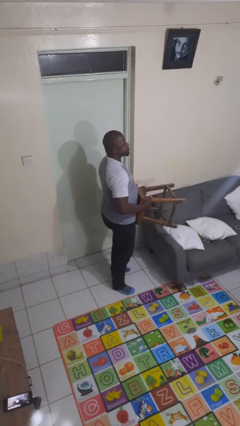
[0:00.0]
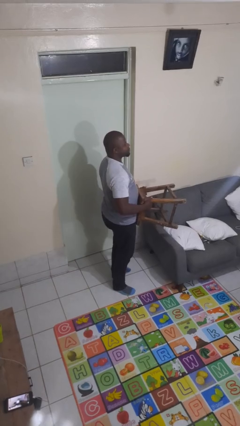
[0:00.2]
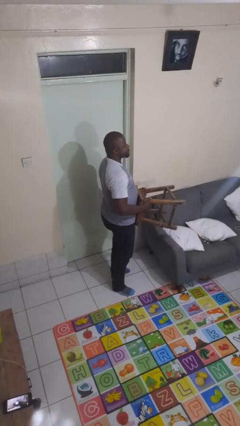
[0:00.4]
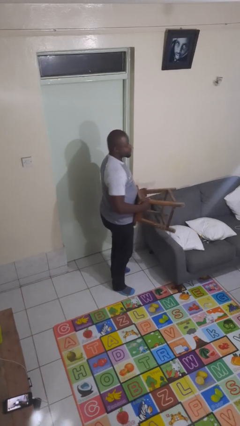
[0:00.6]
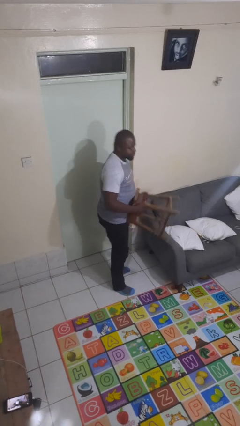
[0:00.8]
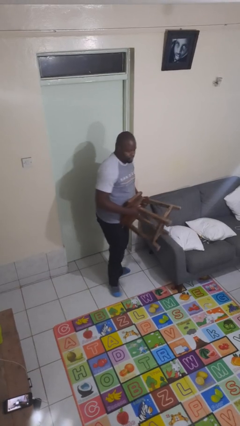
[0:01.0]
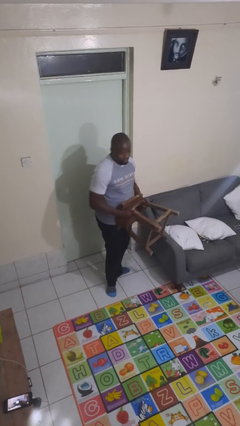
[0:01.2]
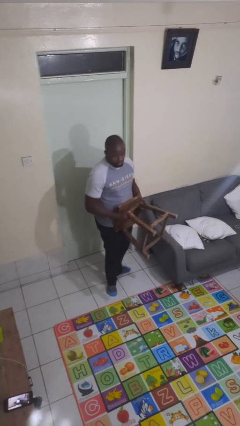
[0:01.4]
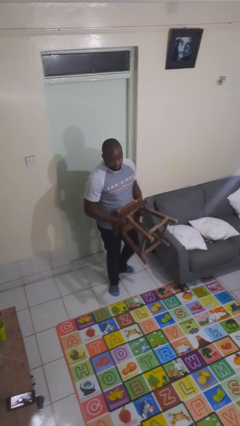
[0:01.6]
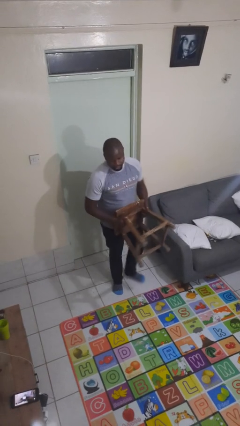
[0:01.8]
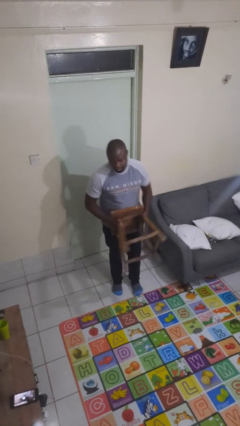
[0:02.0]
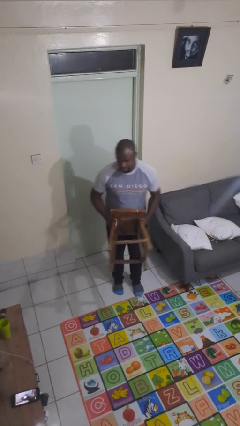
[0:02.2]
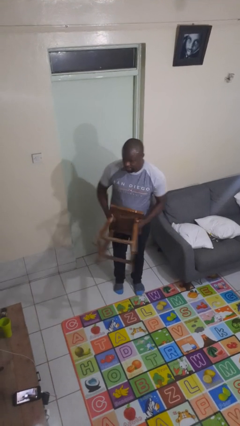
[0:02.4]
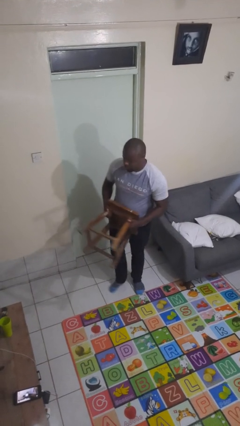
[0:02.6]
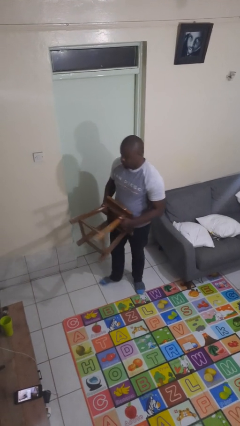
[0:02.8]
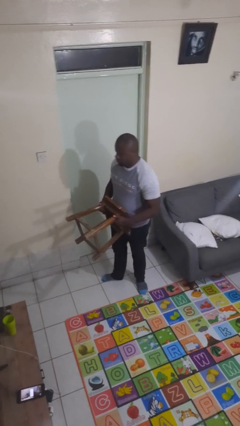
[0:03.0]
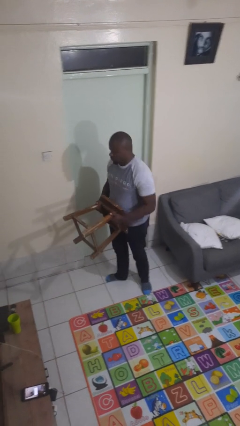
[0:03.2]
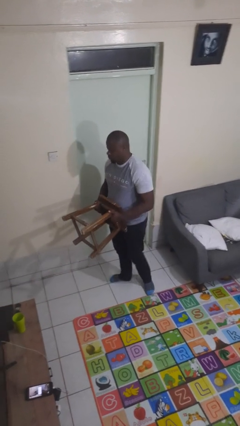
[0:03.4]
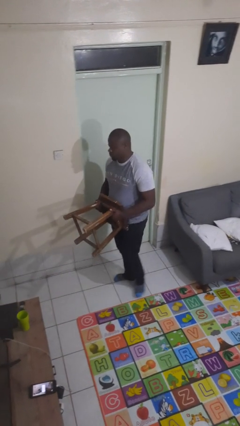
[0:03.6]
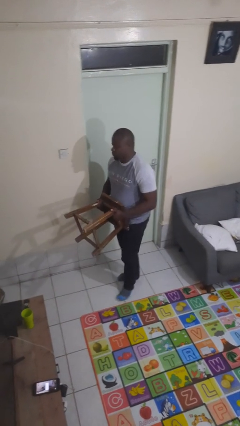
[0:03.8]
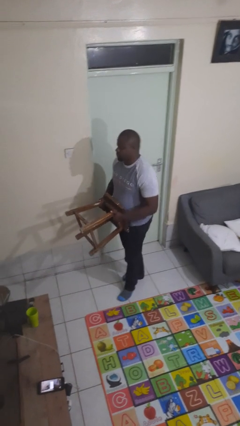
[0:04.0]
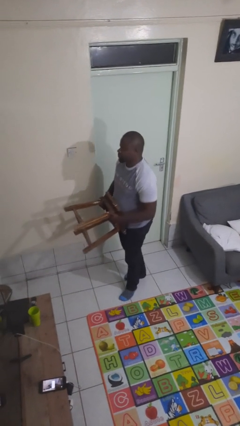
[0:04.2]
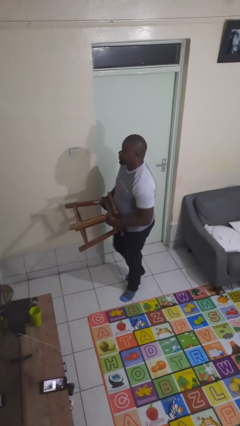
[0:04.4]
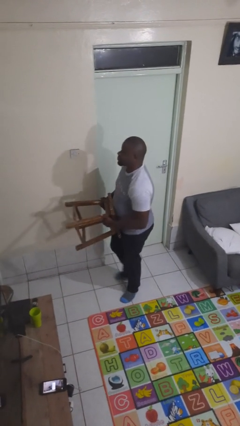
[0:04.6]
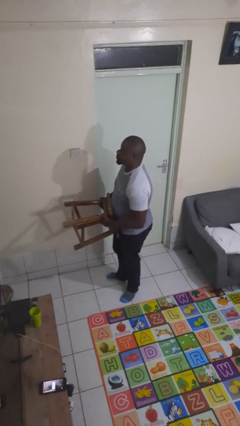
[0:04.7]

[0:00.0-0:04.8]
person carries furniture

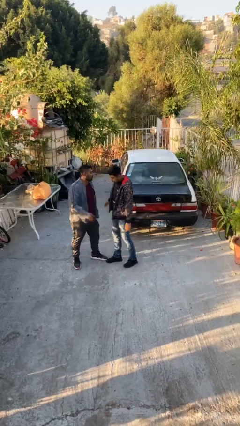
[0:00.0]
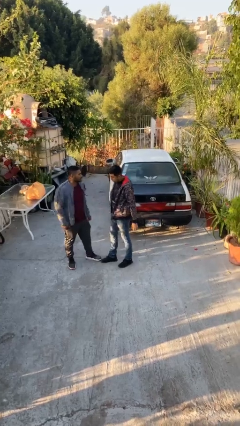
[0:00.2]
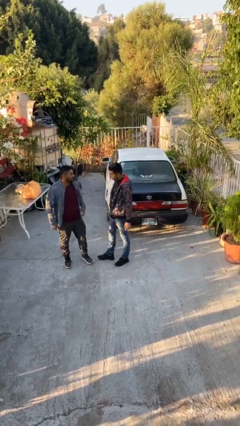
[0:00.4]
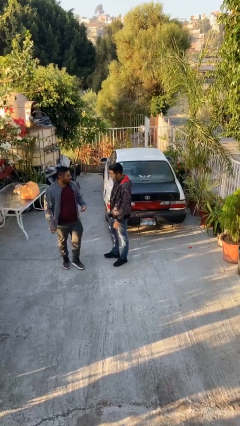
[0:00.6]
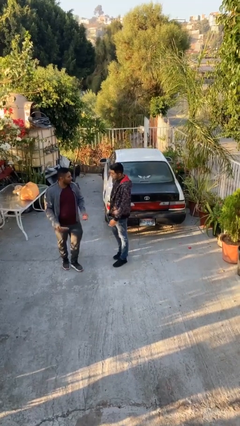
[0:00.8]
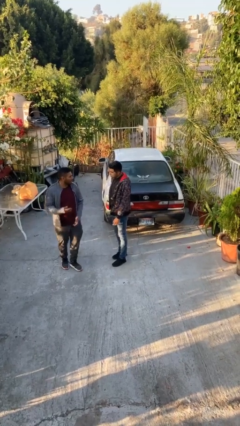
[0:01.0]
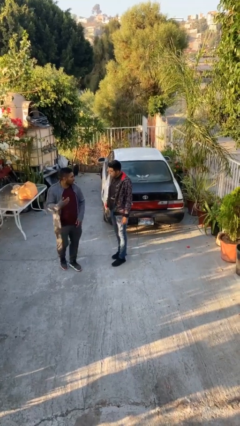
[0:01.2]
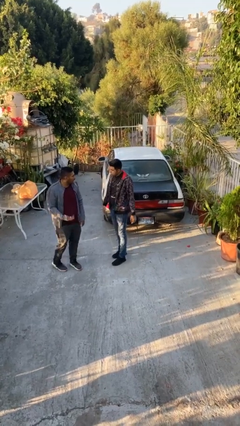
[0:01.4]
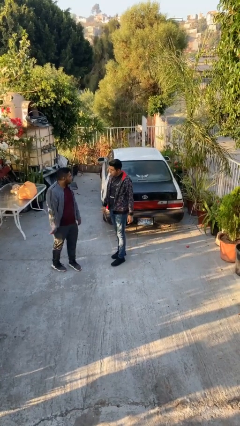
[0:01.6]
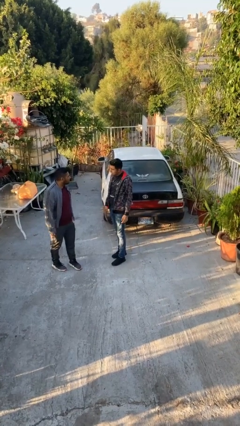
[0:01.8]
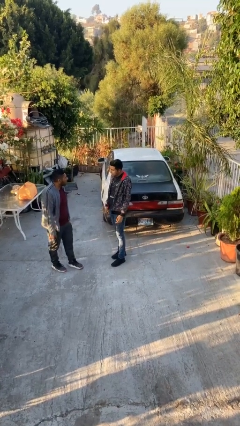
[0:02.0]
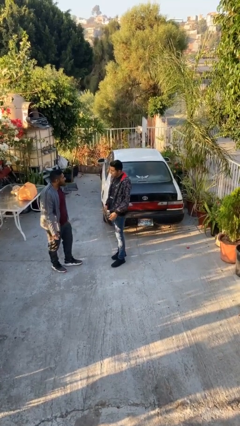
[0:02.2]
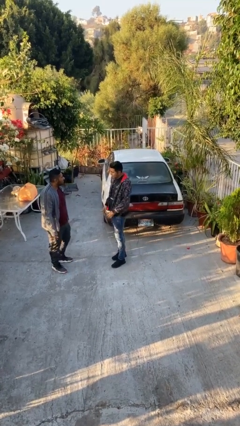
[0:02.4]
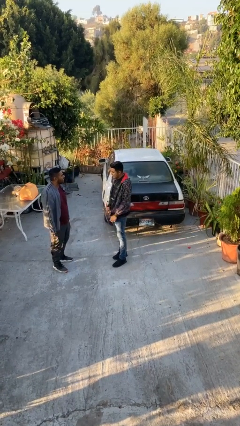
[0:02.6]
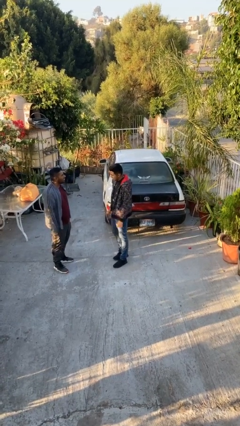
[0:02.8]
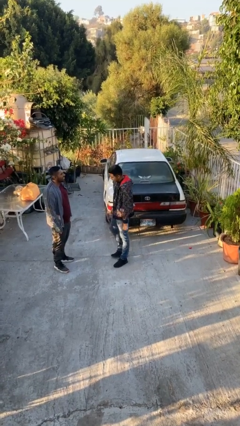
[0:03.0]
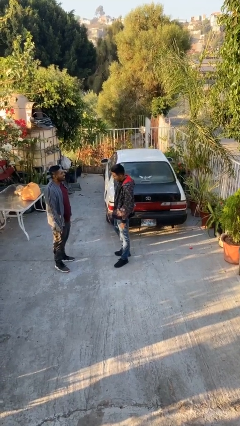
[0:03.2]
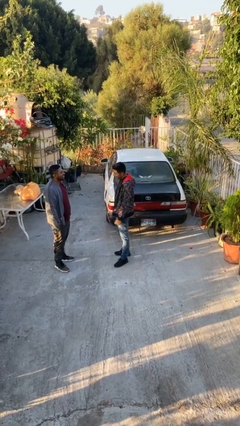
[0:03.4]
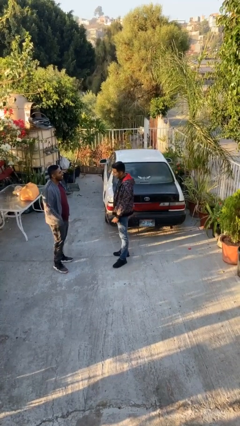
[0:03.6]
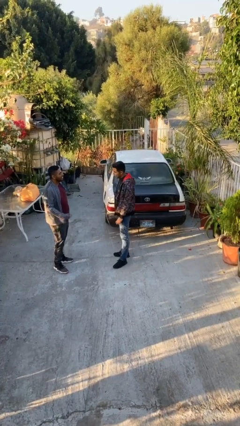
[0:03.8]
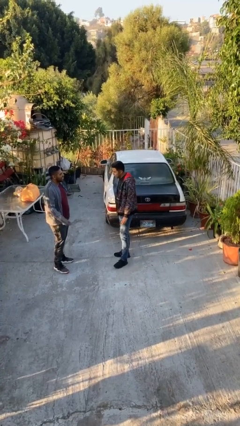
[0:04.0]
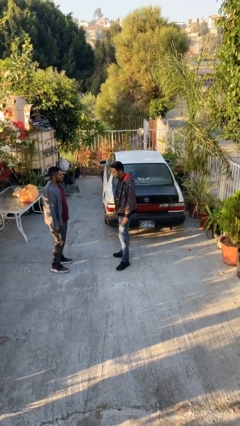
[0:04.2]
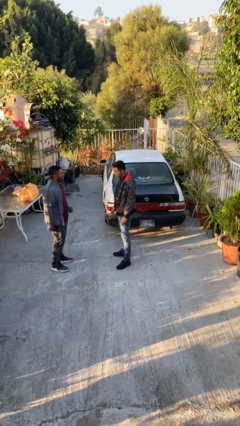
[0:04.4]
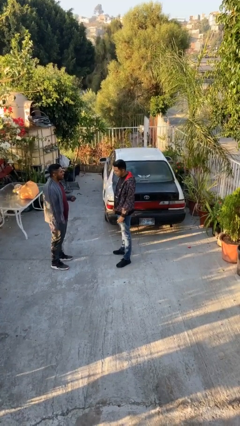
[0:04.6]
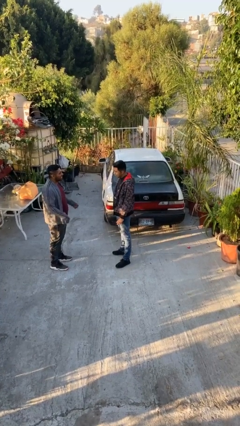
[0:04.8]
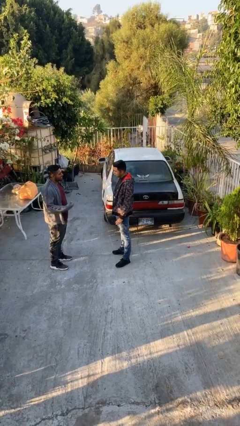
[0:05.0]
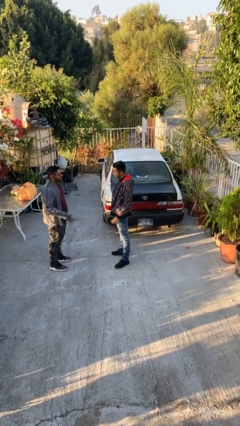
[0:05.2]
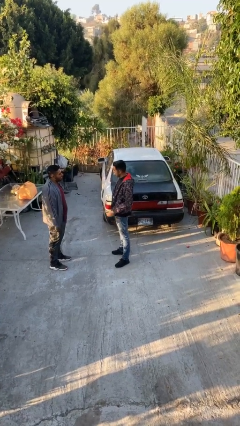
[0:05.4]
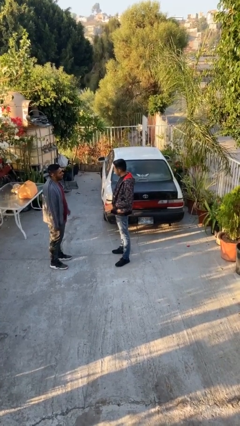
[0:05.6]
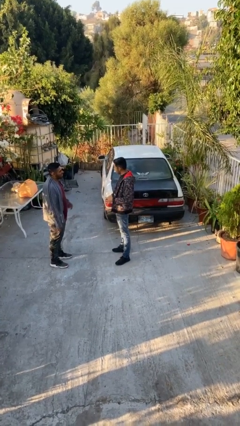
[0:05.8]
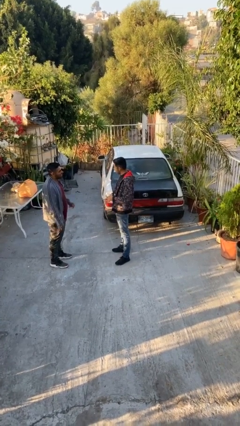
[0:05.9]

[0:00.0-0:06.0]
person talks to person

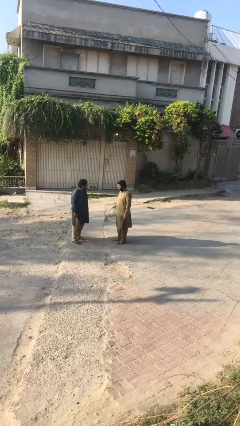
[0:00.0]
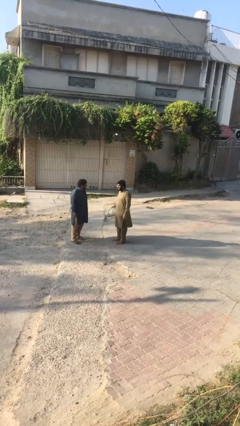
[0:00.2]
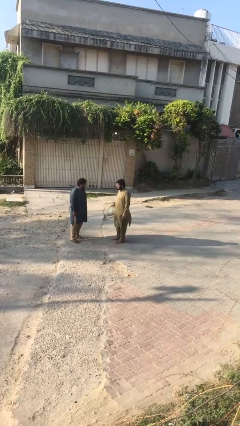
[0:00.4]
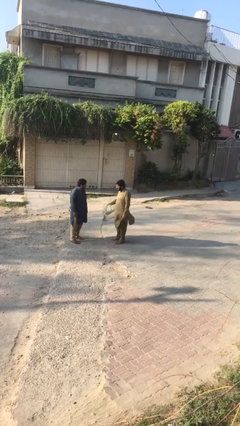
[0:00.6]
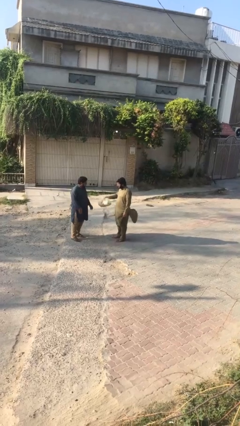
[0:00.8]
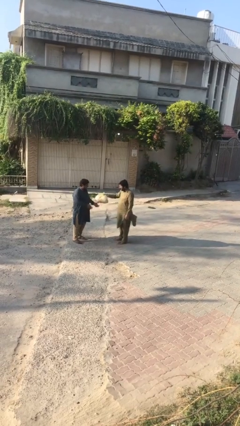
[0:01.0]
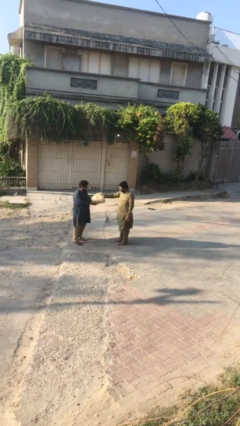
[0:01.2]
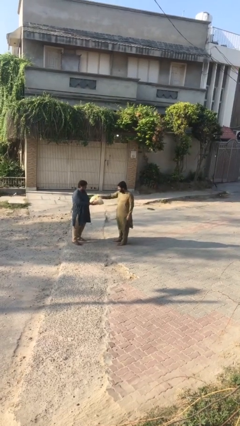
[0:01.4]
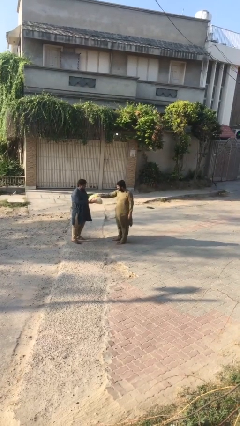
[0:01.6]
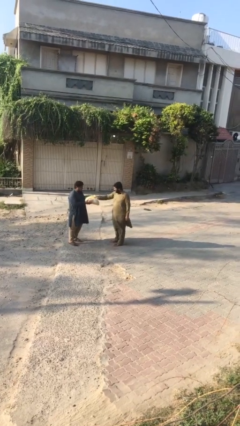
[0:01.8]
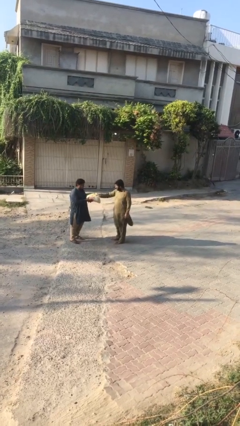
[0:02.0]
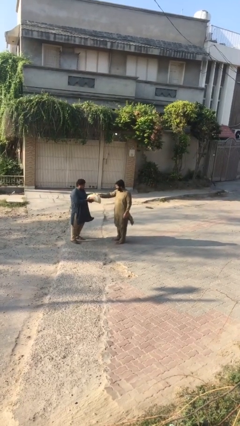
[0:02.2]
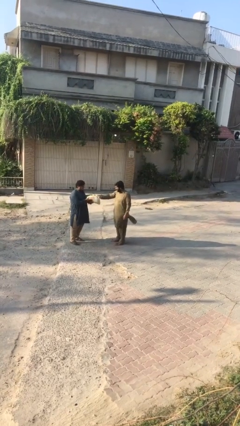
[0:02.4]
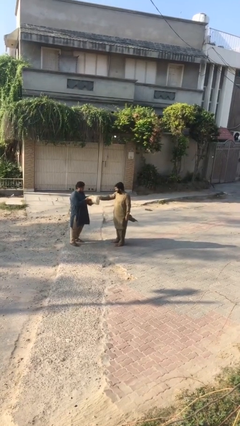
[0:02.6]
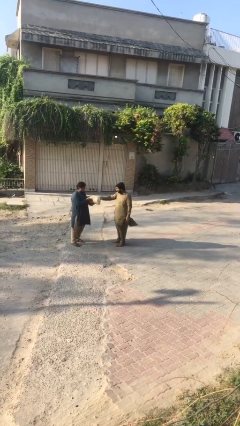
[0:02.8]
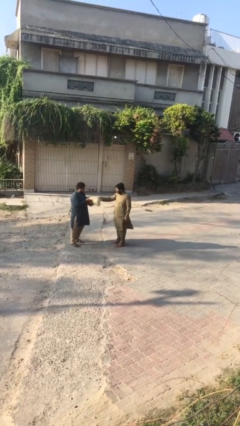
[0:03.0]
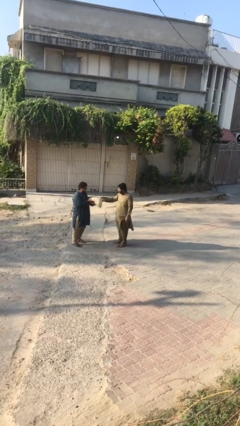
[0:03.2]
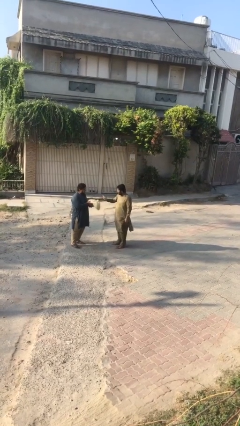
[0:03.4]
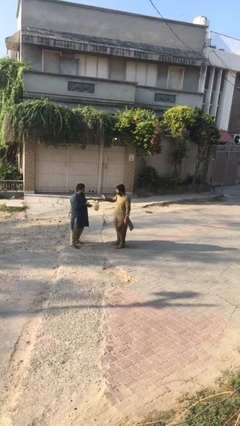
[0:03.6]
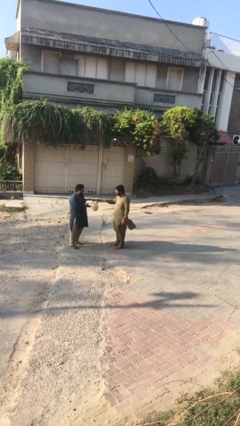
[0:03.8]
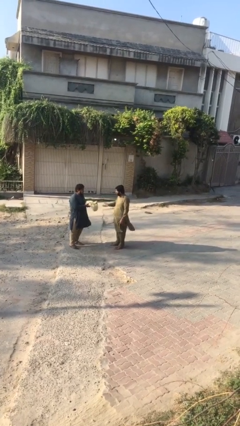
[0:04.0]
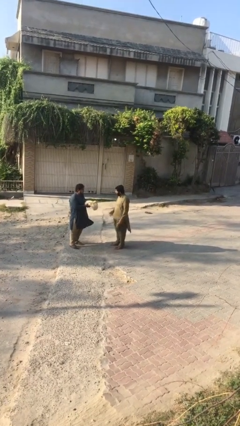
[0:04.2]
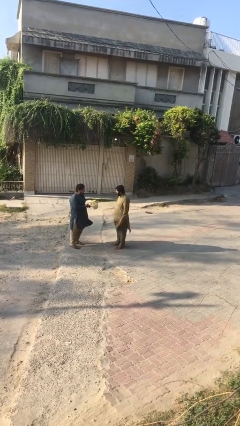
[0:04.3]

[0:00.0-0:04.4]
person transfers object to person

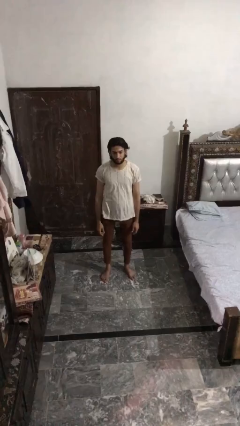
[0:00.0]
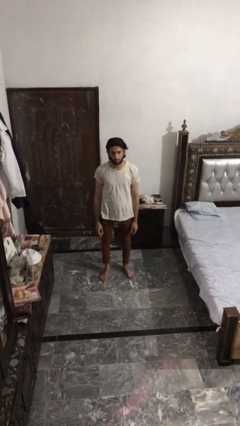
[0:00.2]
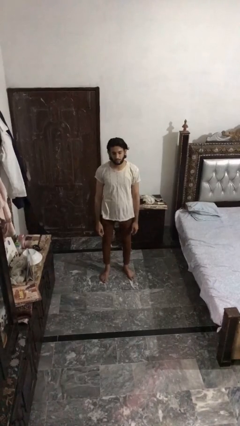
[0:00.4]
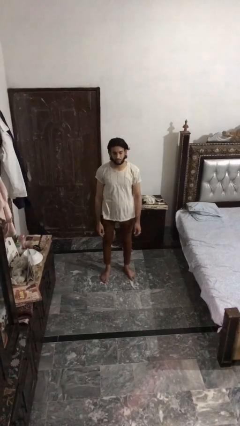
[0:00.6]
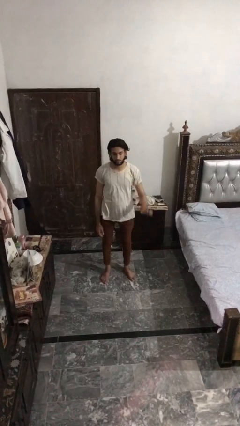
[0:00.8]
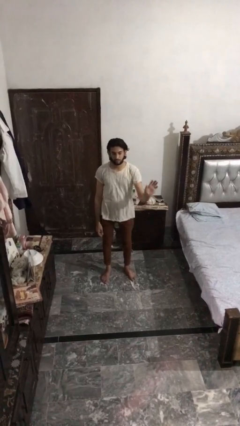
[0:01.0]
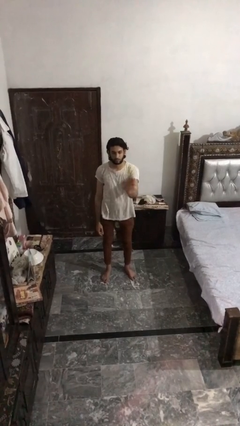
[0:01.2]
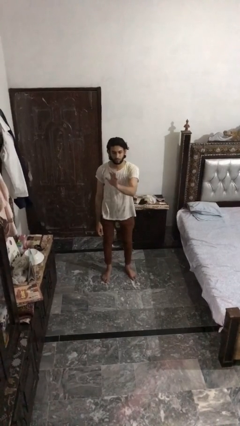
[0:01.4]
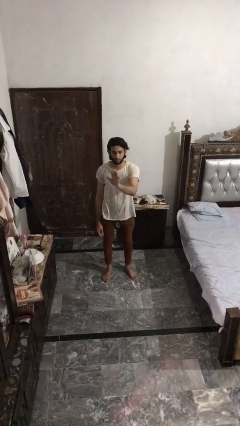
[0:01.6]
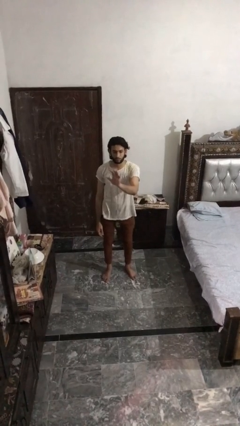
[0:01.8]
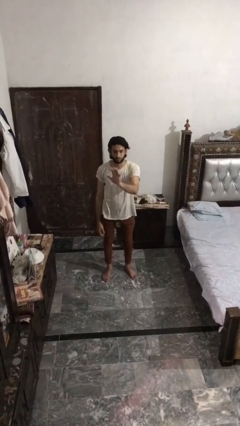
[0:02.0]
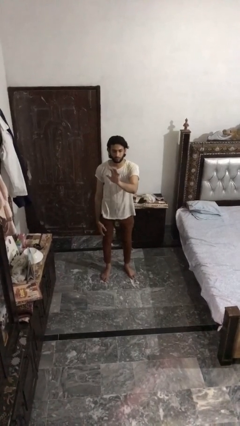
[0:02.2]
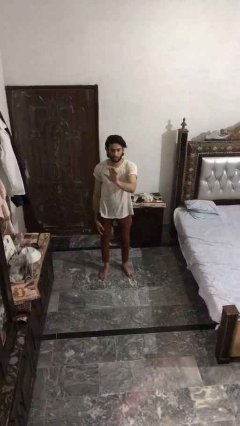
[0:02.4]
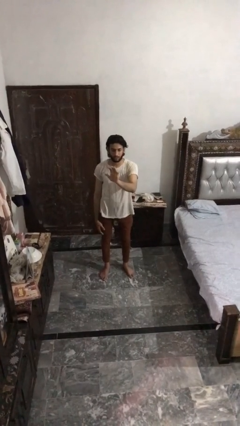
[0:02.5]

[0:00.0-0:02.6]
person gestures swipe left
